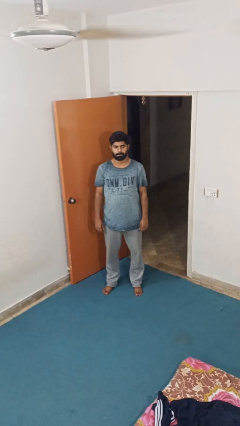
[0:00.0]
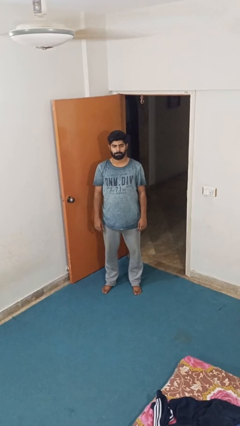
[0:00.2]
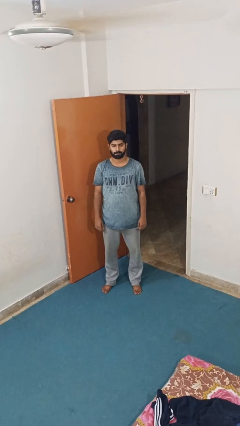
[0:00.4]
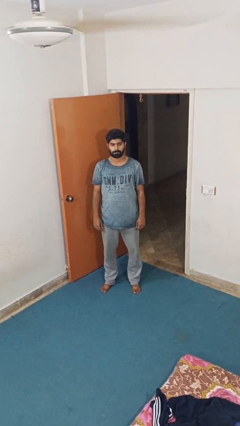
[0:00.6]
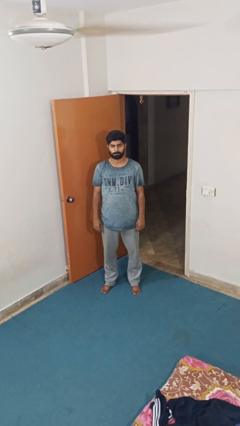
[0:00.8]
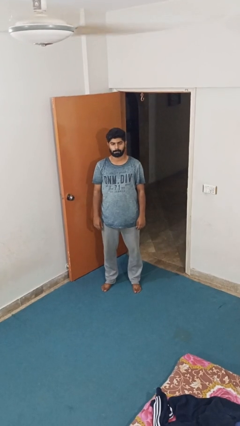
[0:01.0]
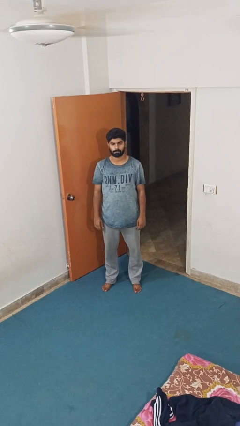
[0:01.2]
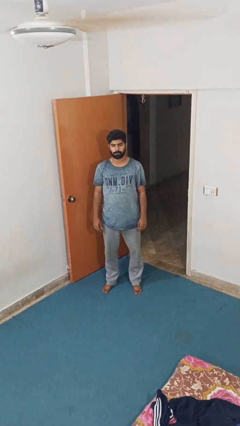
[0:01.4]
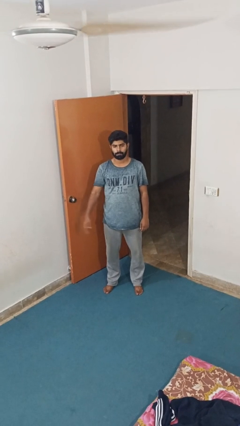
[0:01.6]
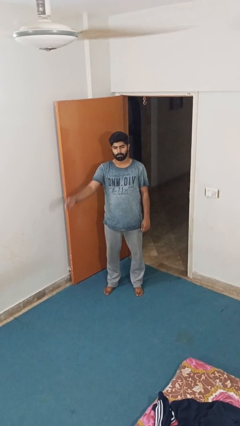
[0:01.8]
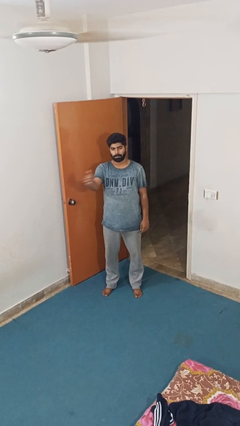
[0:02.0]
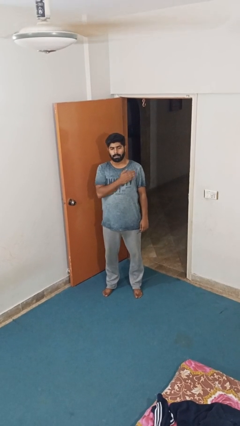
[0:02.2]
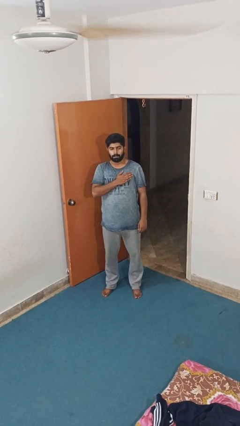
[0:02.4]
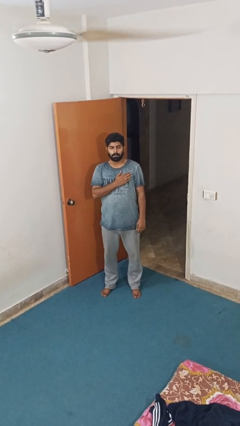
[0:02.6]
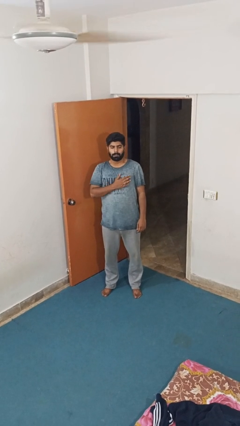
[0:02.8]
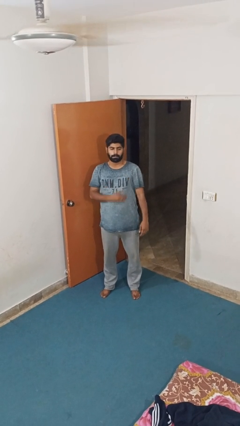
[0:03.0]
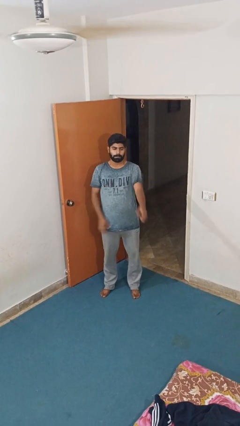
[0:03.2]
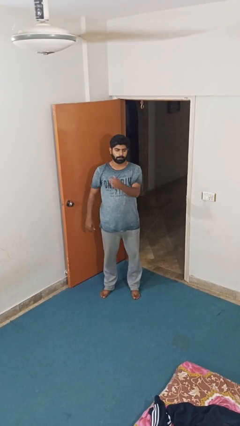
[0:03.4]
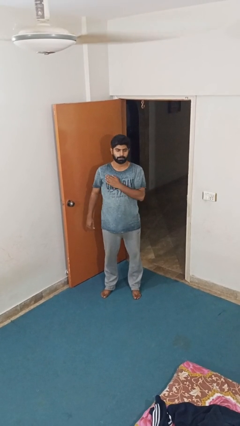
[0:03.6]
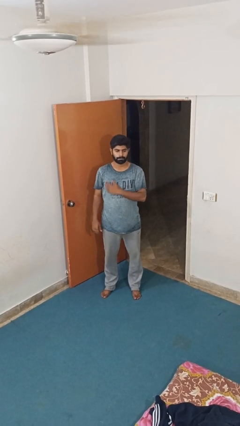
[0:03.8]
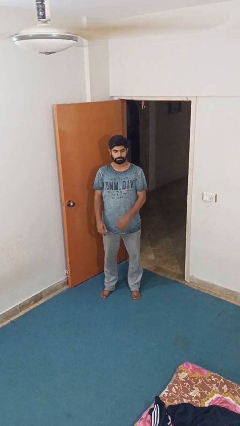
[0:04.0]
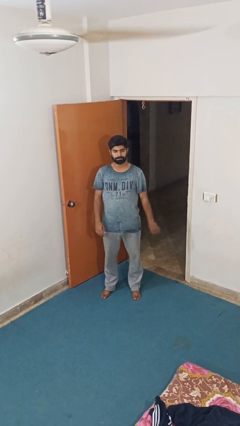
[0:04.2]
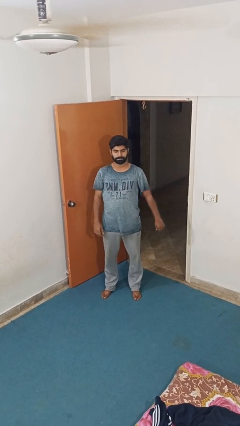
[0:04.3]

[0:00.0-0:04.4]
person drums on chest

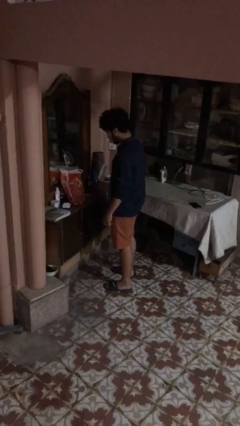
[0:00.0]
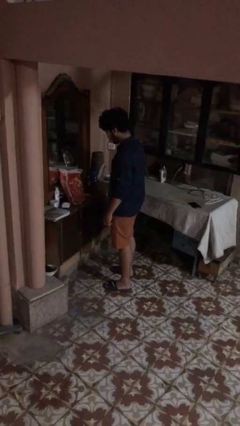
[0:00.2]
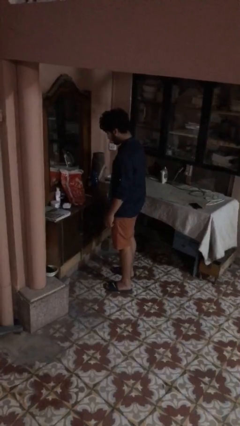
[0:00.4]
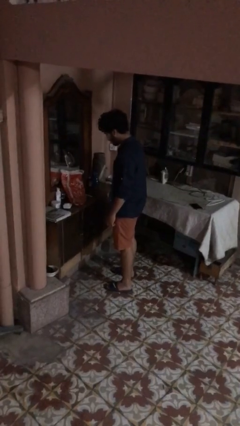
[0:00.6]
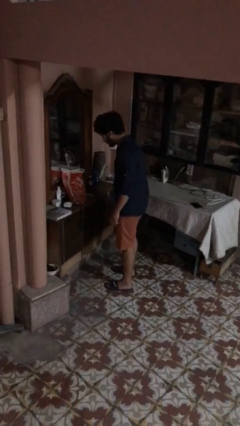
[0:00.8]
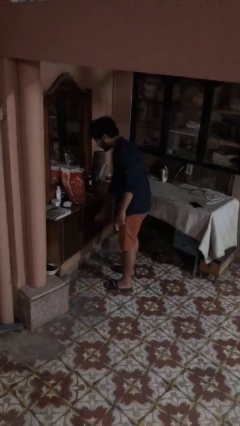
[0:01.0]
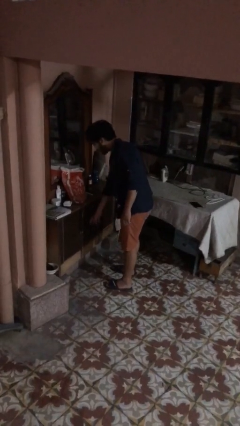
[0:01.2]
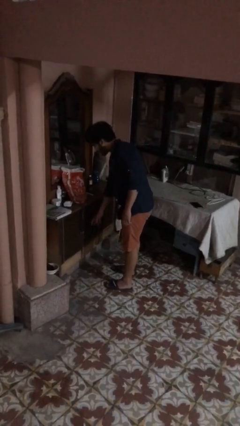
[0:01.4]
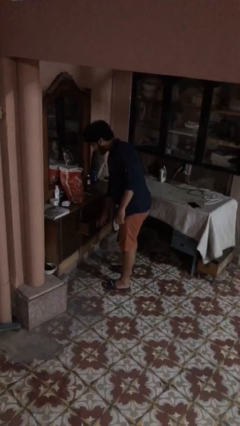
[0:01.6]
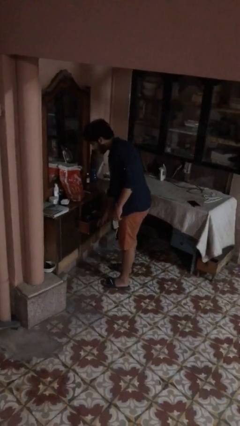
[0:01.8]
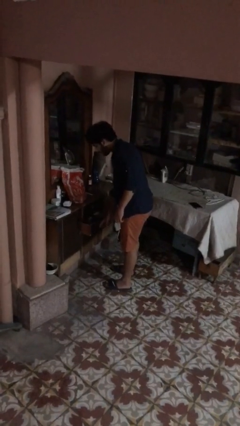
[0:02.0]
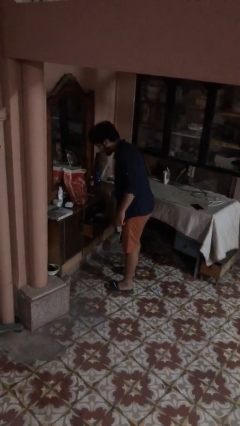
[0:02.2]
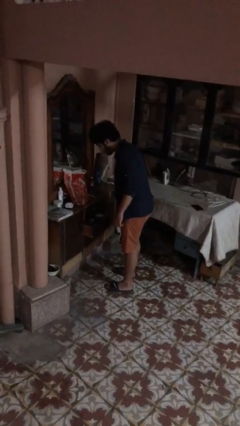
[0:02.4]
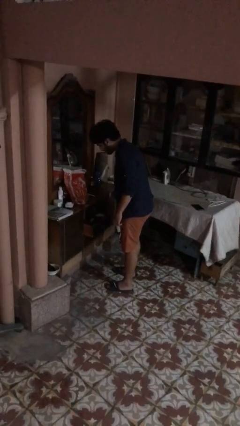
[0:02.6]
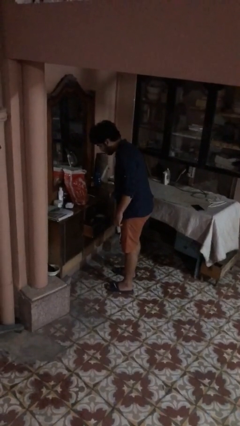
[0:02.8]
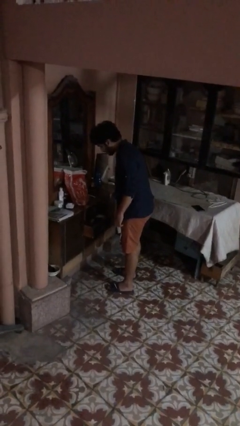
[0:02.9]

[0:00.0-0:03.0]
person opens dresser drawer

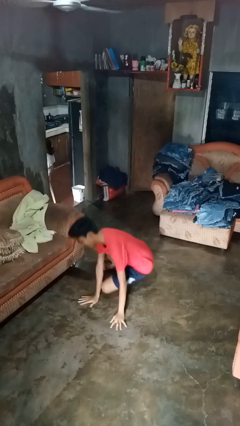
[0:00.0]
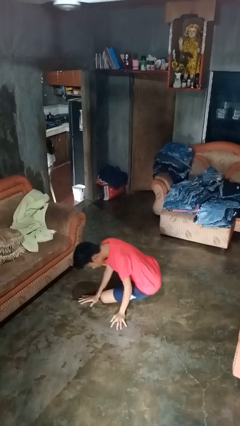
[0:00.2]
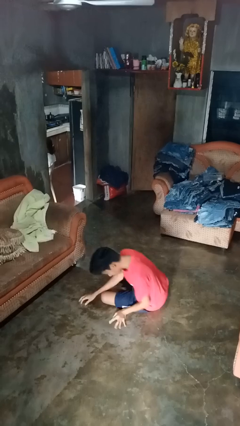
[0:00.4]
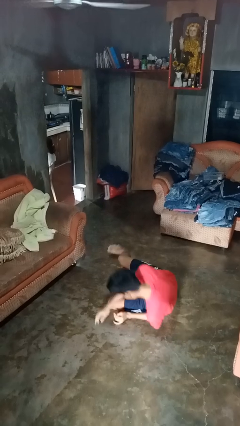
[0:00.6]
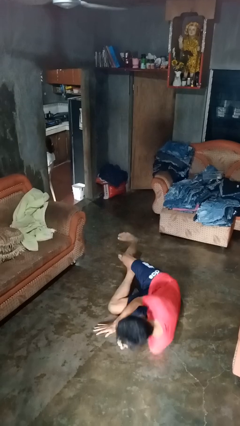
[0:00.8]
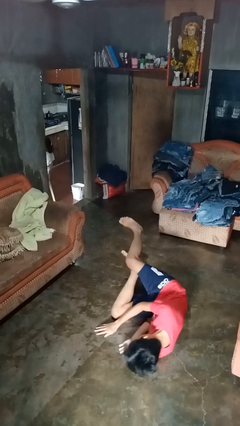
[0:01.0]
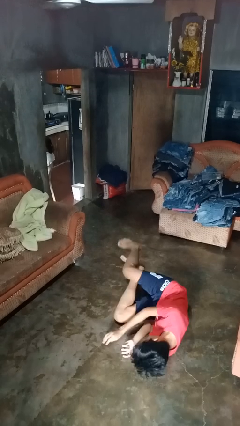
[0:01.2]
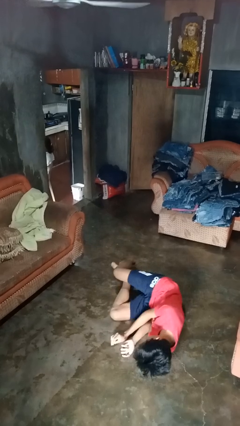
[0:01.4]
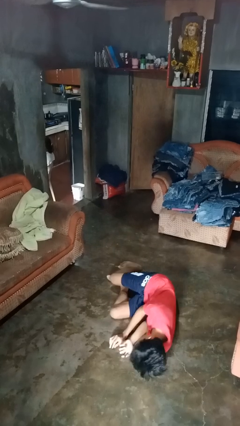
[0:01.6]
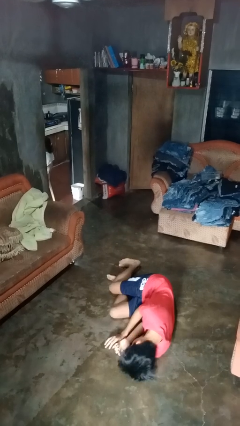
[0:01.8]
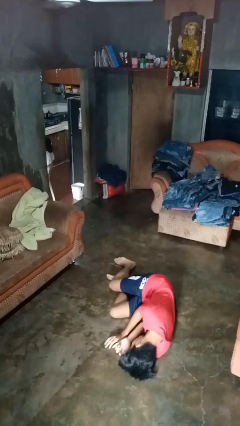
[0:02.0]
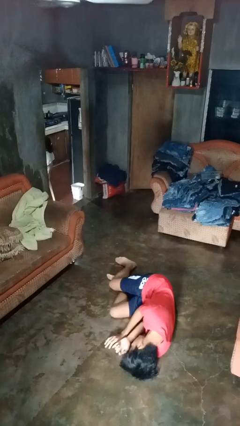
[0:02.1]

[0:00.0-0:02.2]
person falls while standing

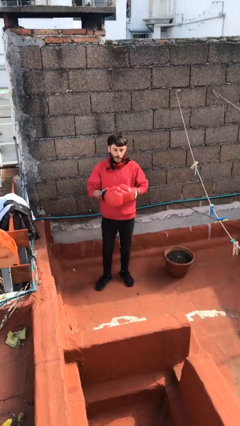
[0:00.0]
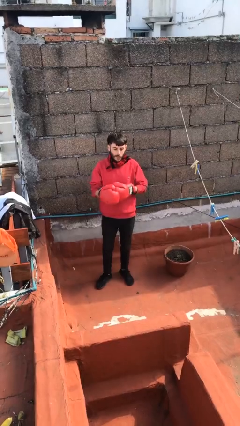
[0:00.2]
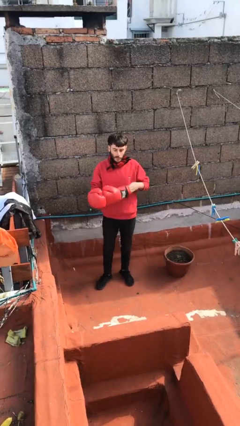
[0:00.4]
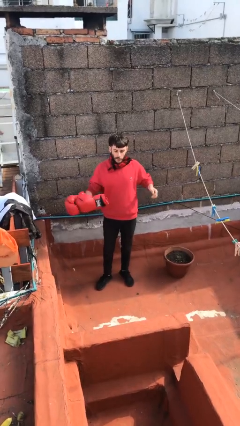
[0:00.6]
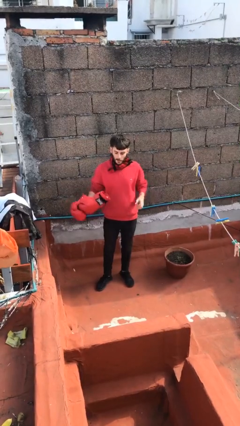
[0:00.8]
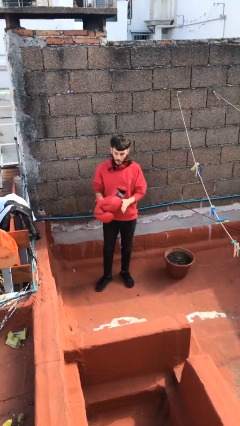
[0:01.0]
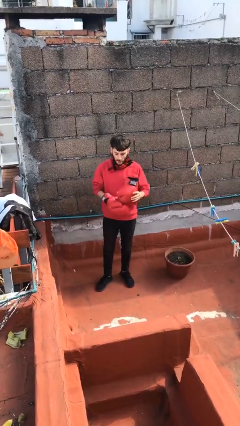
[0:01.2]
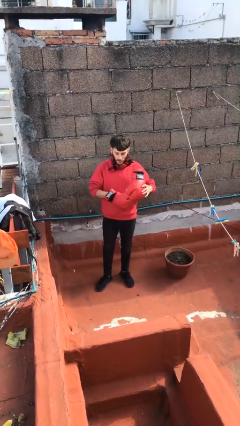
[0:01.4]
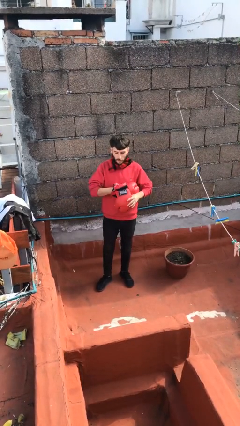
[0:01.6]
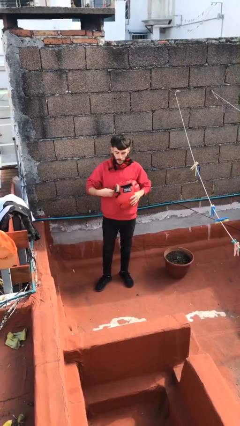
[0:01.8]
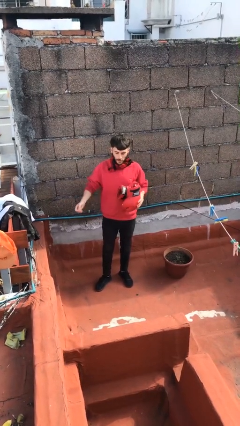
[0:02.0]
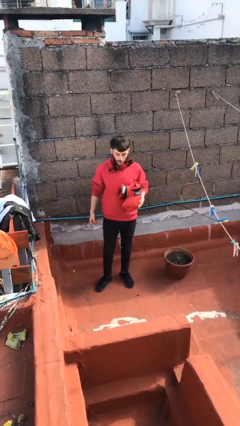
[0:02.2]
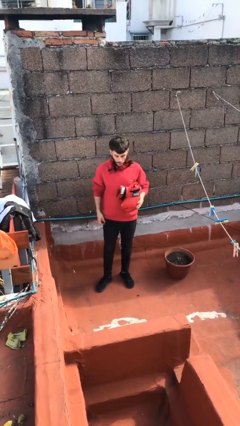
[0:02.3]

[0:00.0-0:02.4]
person takes off gloves

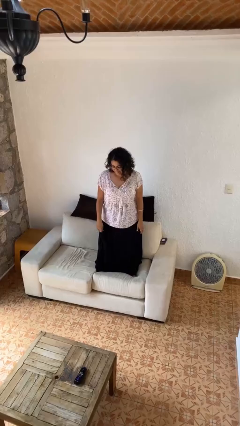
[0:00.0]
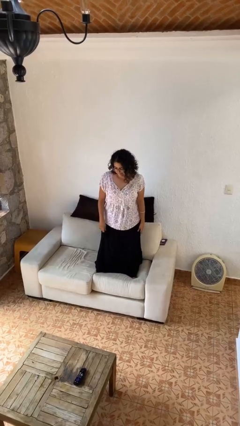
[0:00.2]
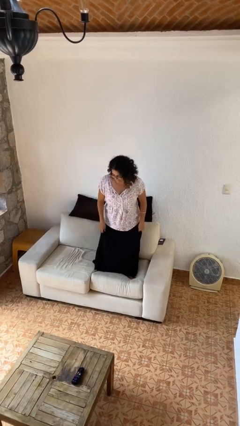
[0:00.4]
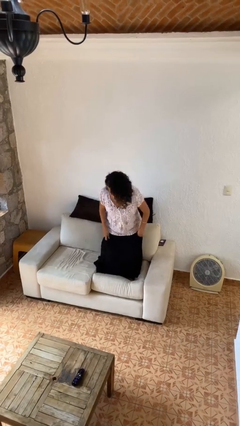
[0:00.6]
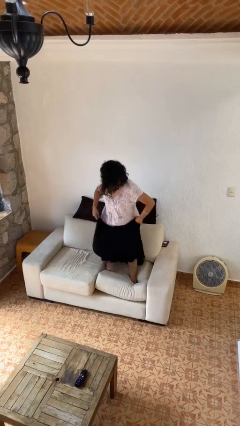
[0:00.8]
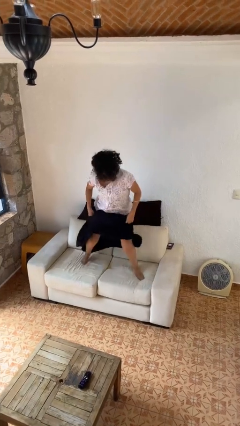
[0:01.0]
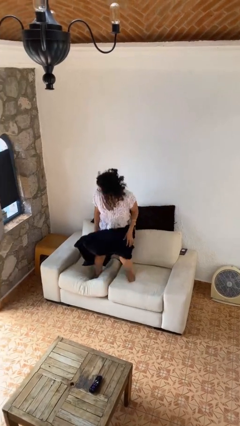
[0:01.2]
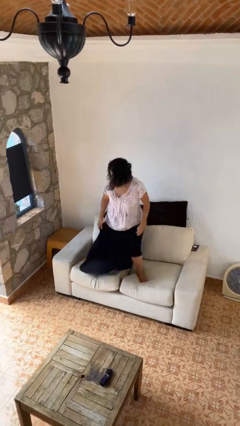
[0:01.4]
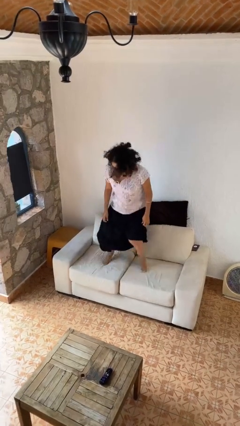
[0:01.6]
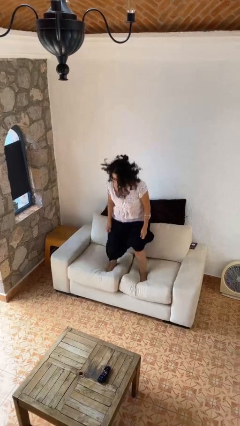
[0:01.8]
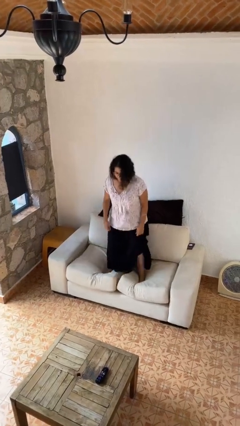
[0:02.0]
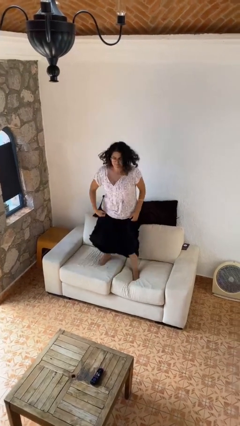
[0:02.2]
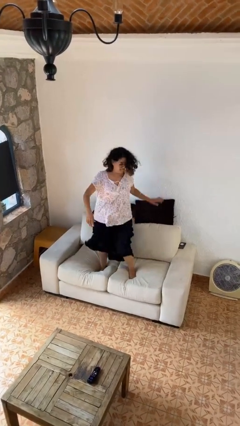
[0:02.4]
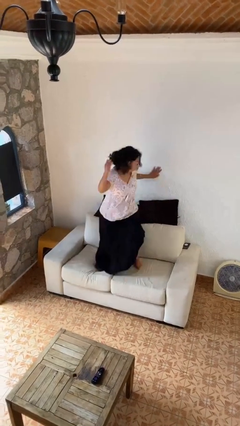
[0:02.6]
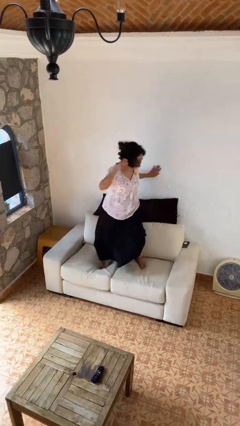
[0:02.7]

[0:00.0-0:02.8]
person jumps on couch

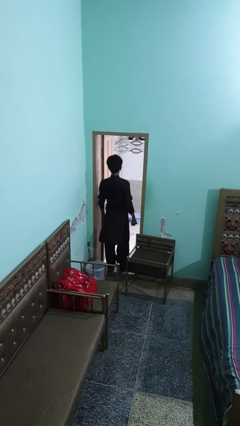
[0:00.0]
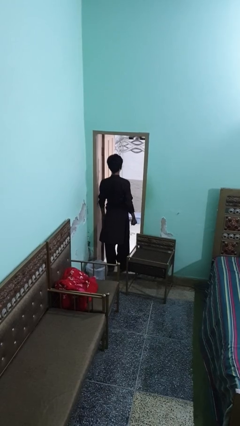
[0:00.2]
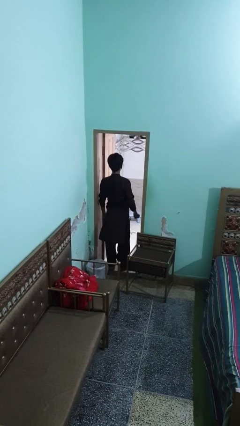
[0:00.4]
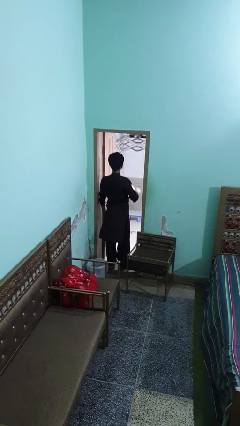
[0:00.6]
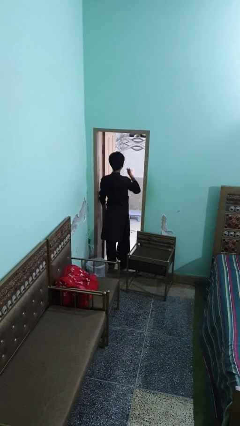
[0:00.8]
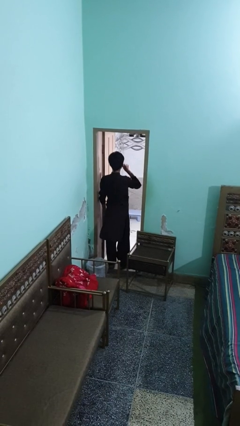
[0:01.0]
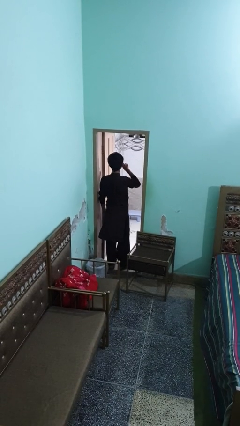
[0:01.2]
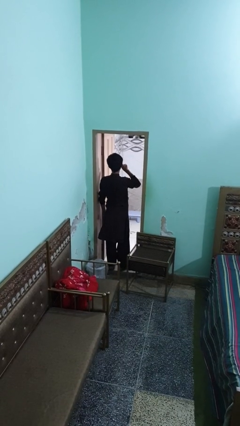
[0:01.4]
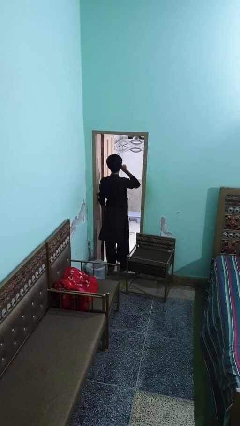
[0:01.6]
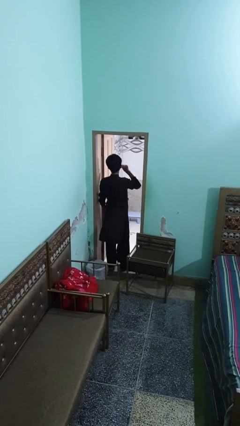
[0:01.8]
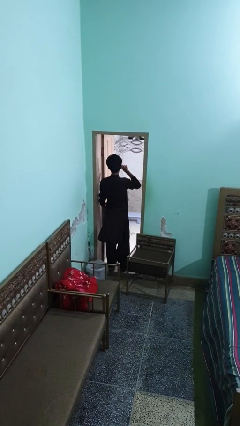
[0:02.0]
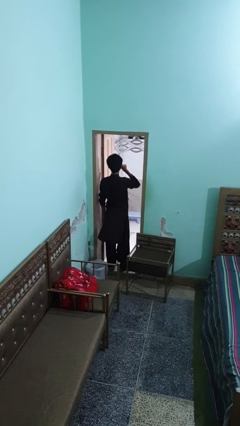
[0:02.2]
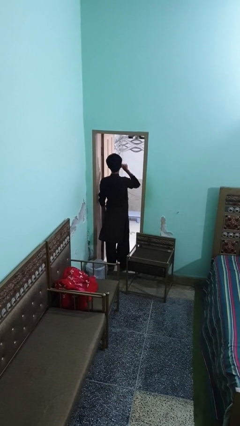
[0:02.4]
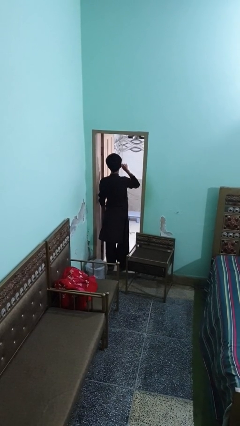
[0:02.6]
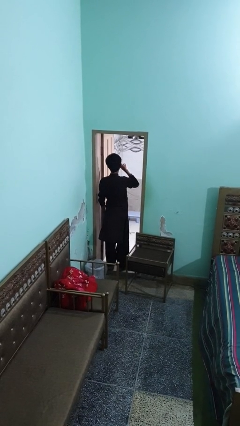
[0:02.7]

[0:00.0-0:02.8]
person brushes teeth
